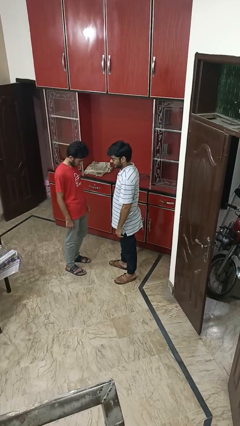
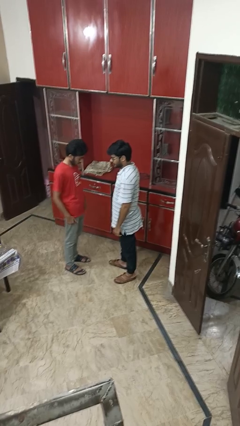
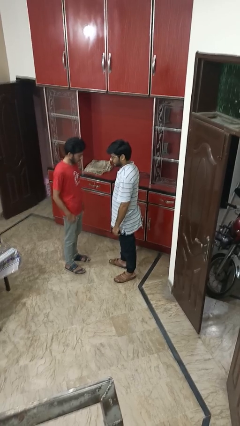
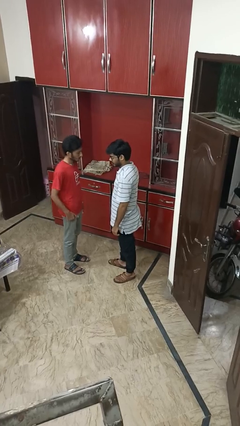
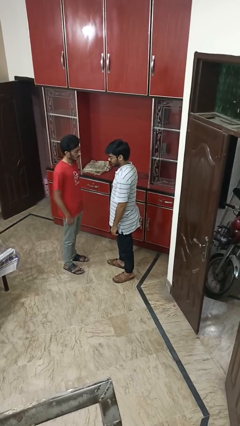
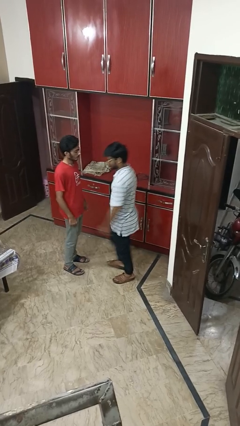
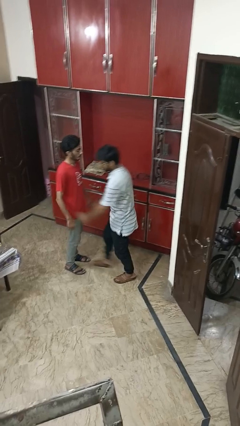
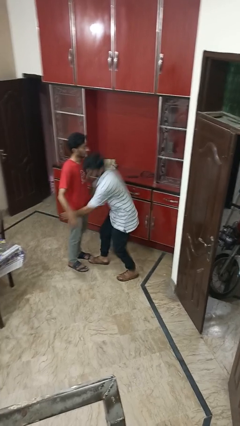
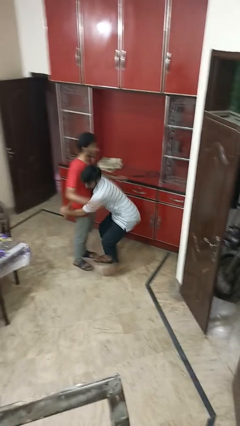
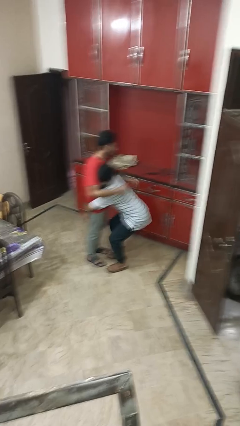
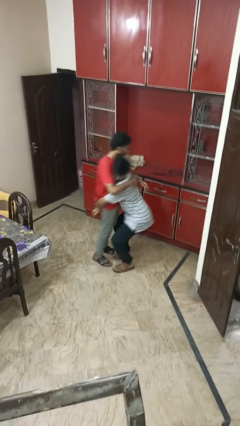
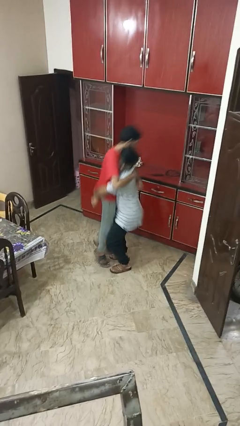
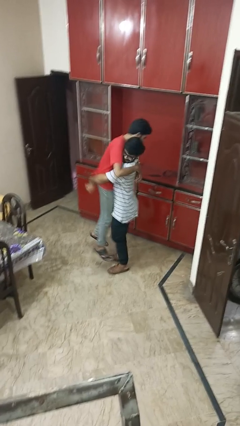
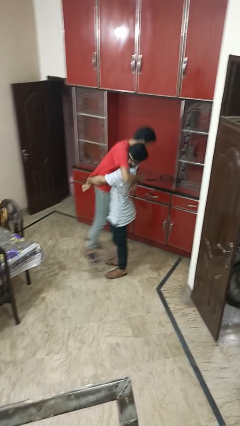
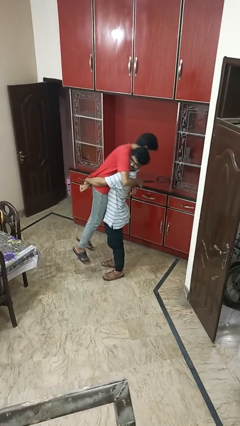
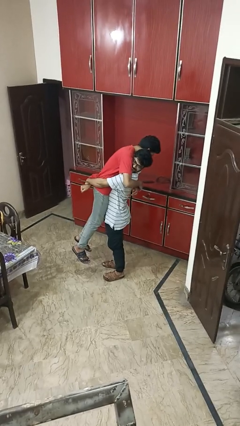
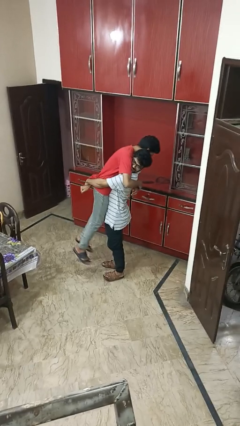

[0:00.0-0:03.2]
person picks up person

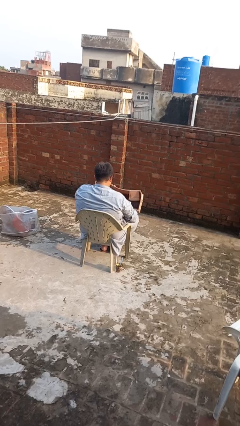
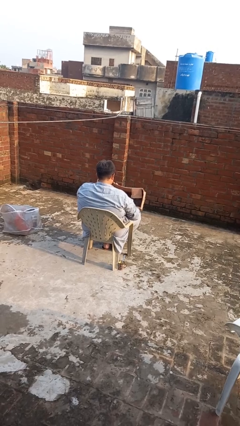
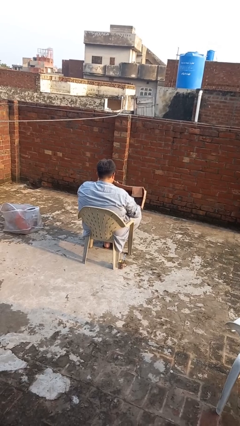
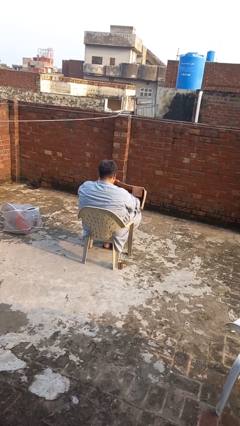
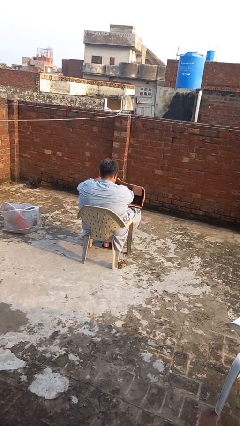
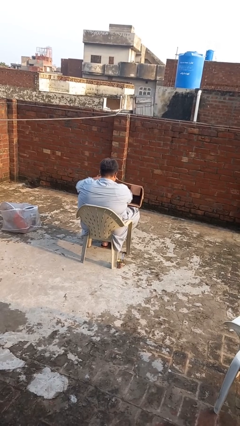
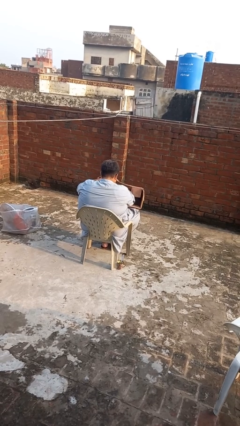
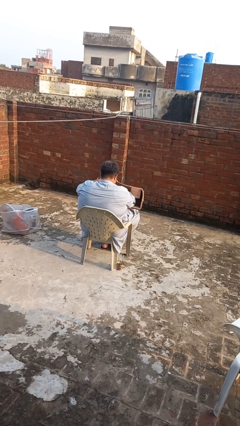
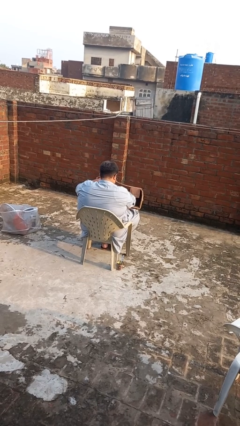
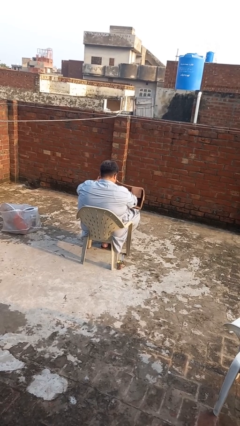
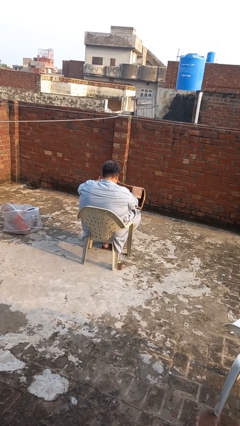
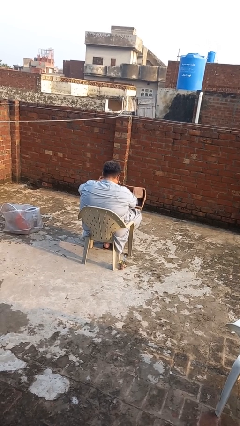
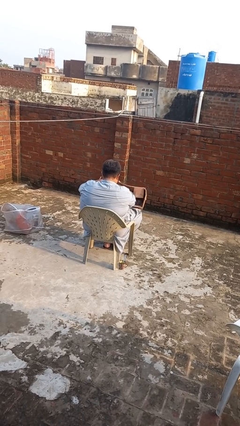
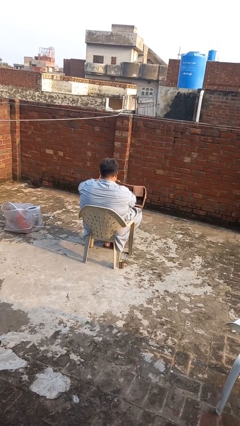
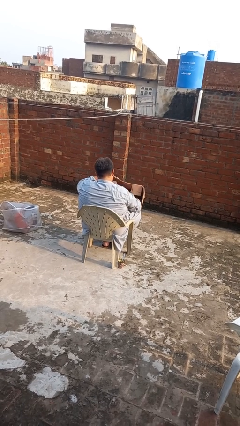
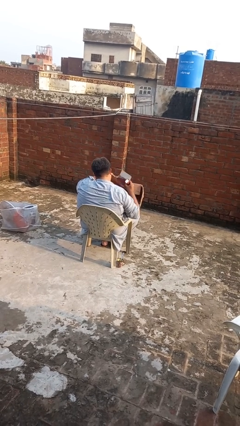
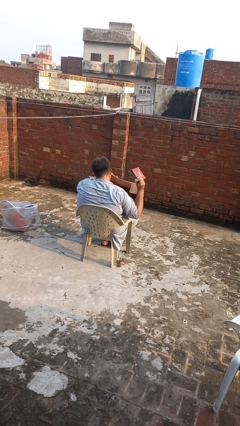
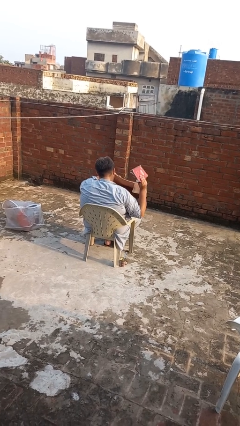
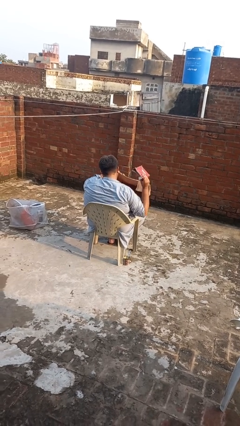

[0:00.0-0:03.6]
person searches in box

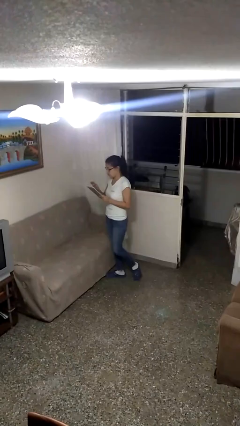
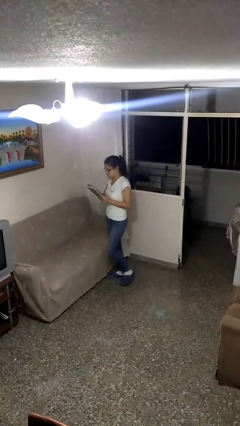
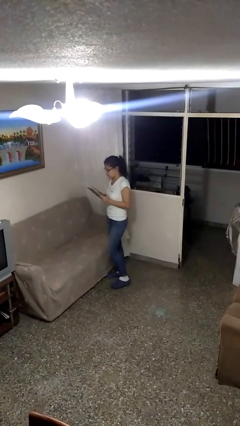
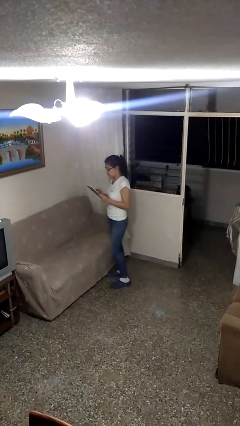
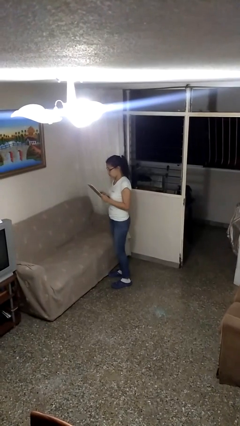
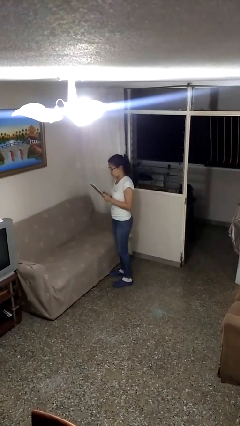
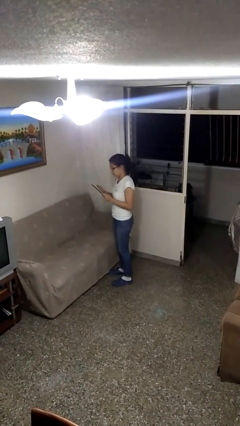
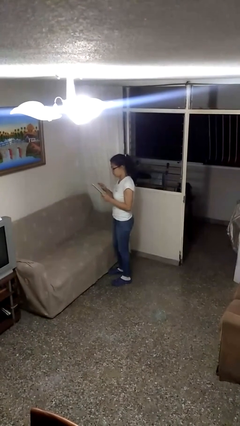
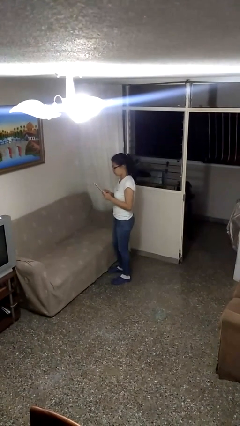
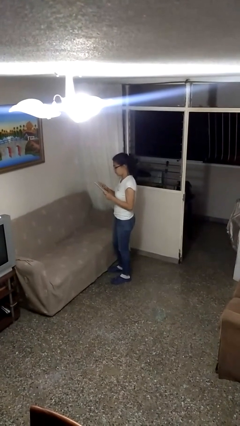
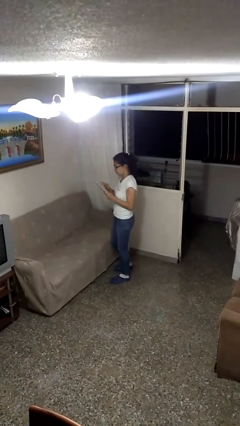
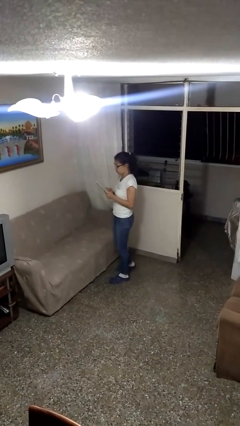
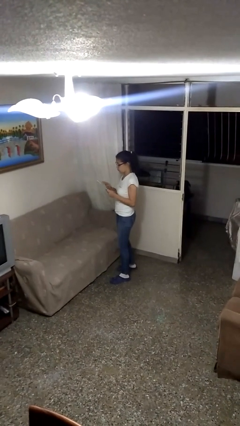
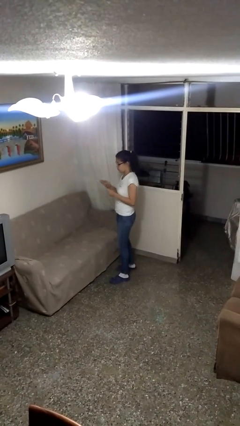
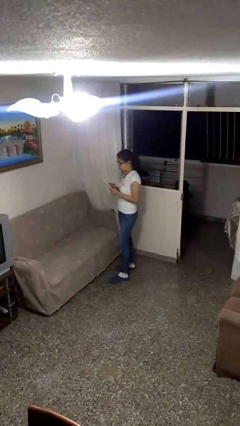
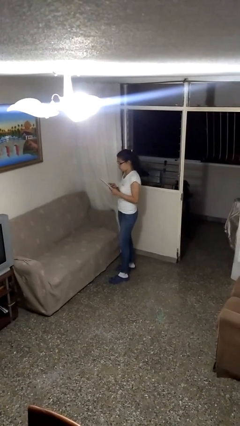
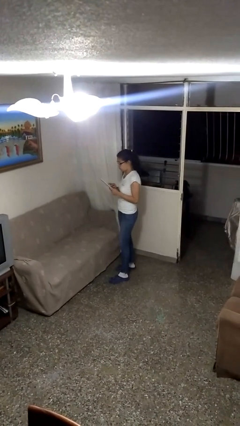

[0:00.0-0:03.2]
person interacts with tablet

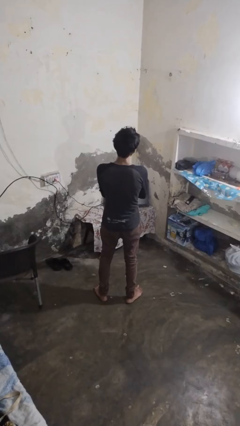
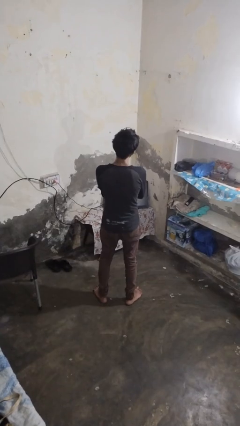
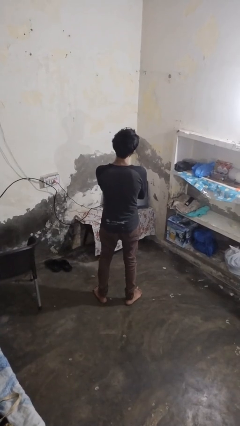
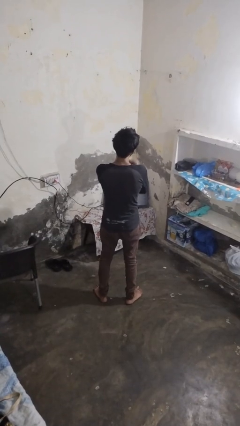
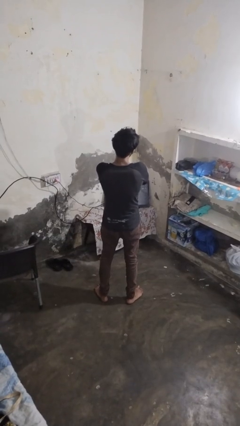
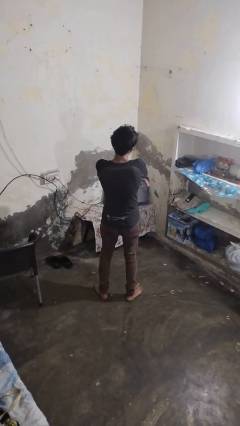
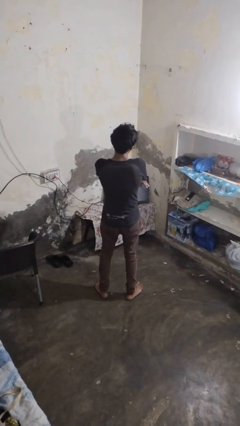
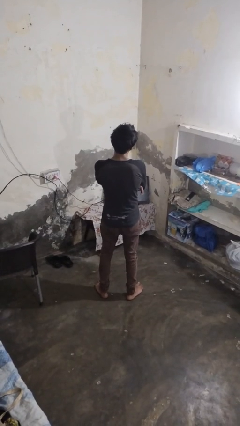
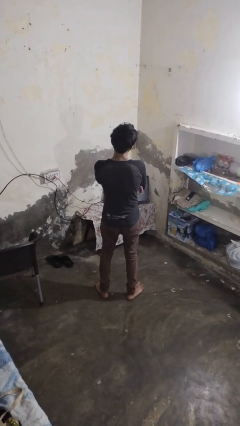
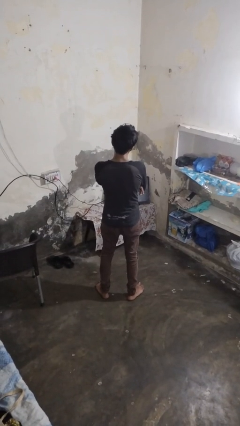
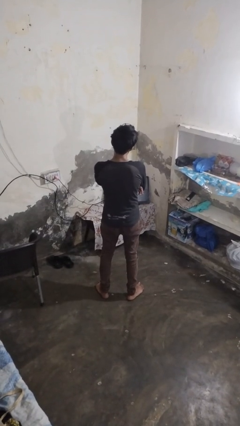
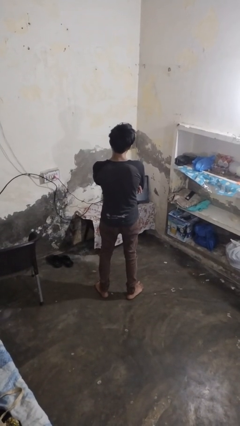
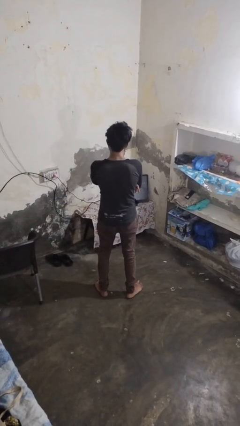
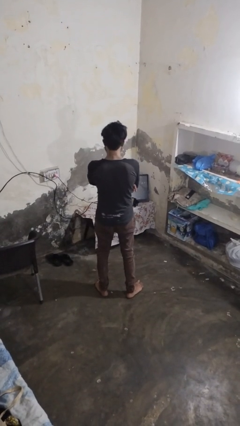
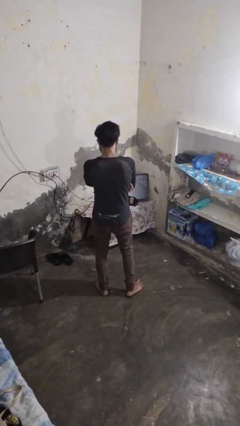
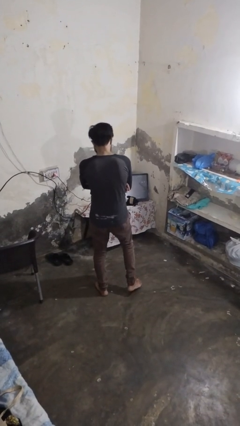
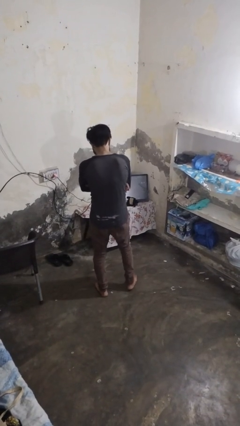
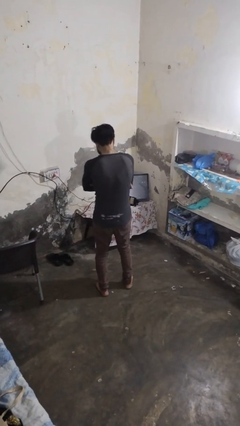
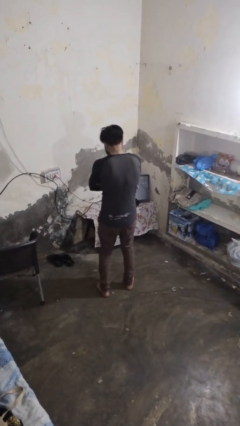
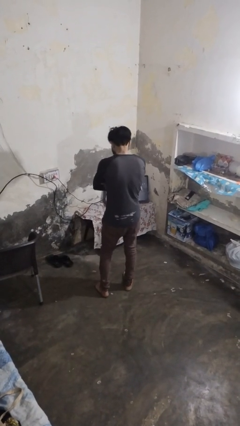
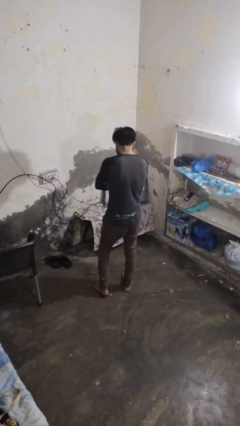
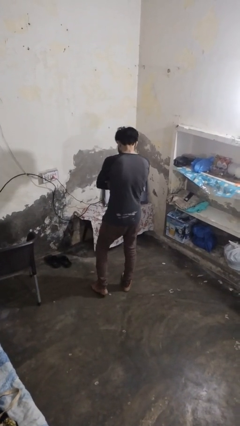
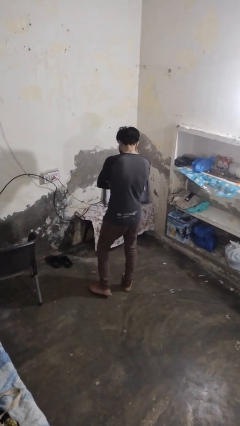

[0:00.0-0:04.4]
person crosses arms

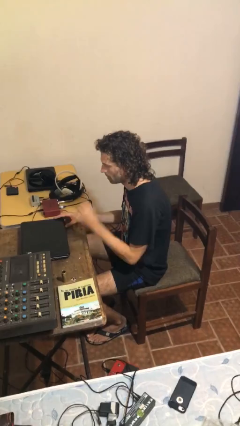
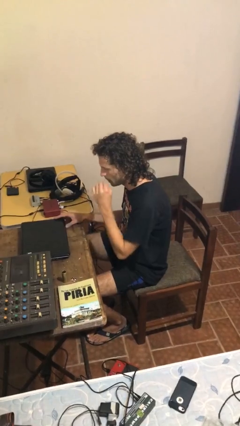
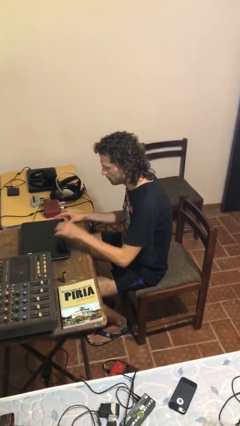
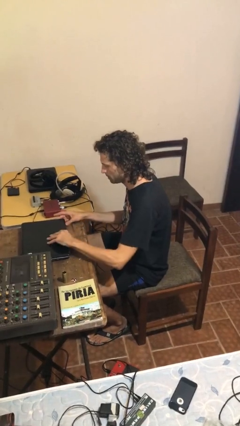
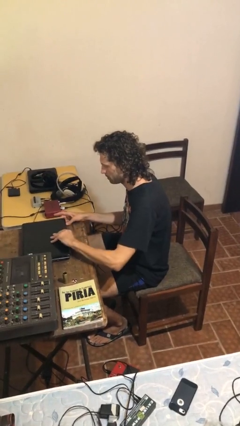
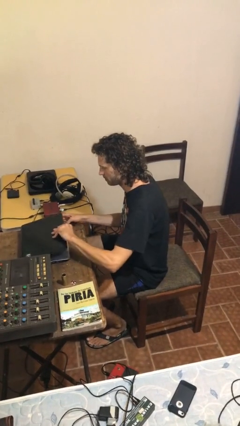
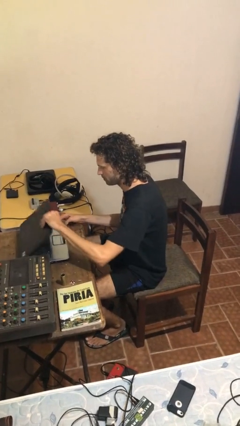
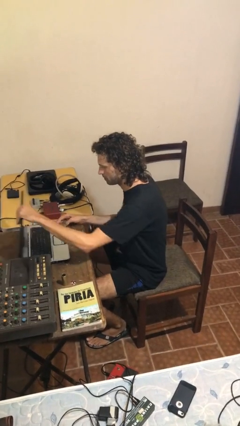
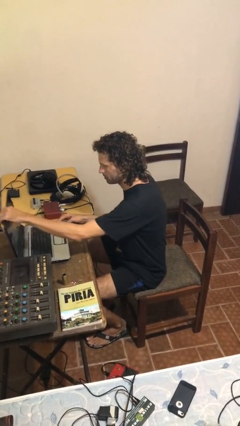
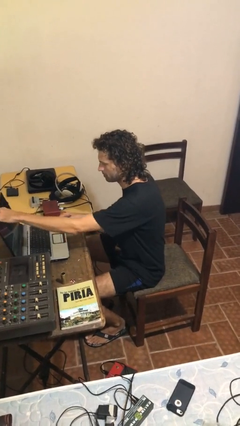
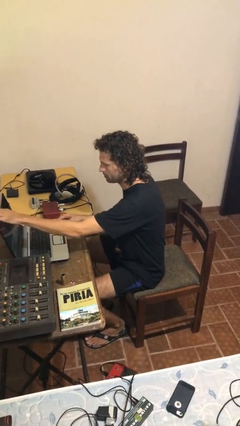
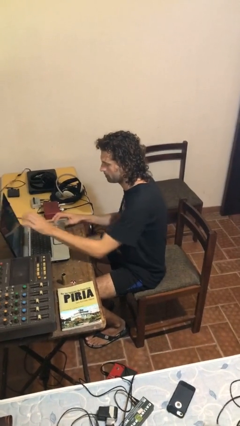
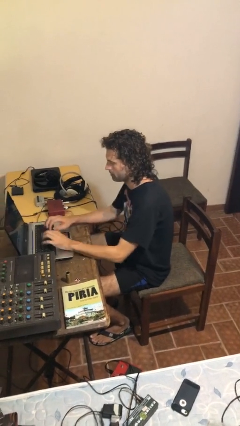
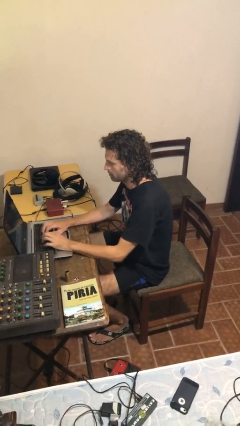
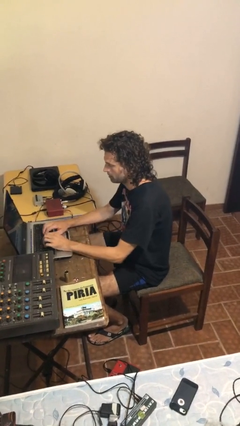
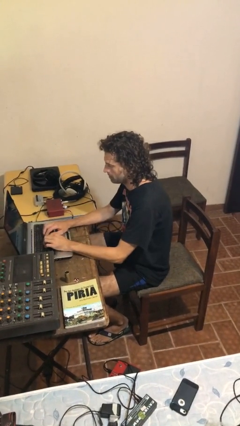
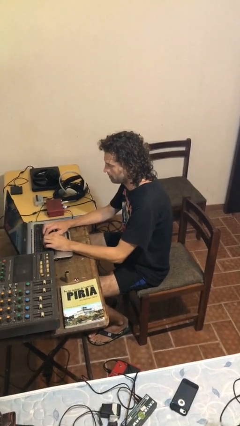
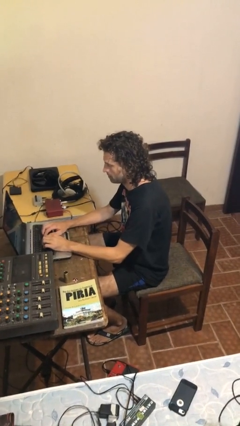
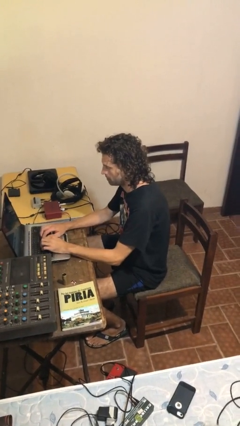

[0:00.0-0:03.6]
person interacts with laptop
